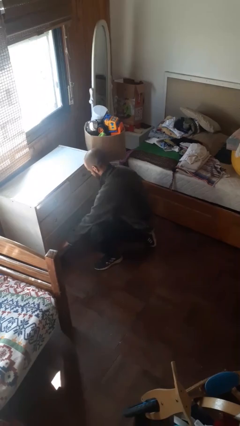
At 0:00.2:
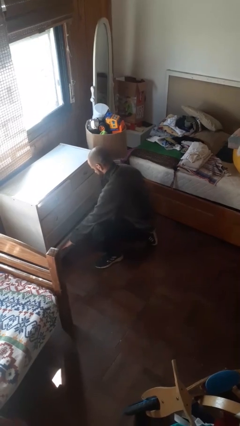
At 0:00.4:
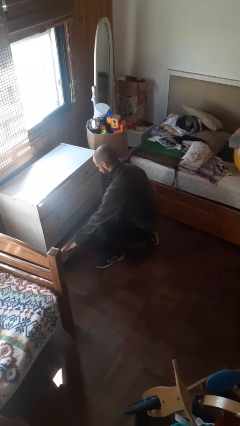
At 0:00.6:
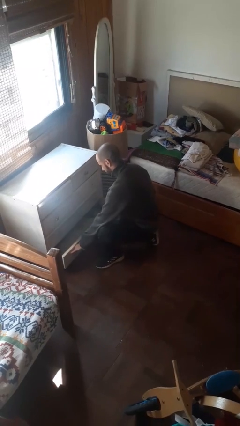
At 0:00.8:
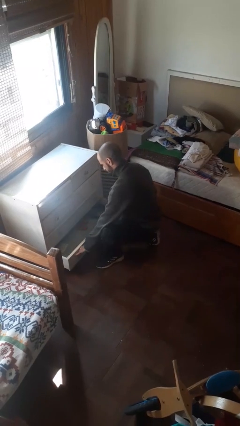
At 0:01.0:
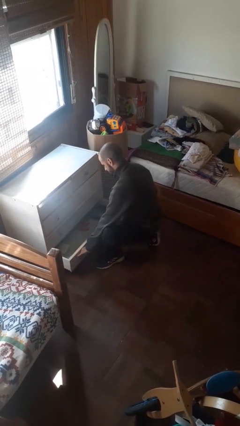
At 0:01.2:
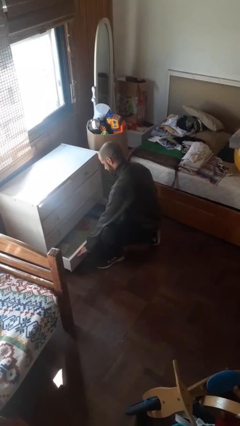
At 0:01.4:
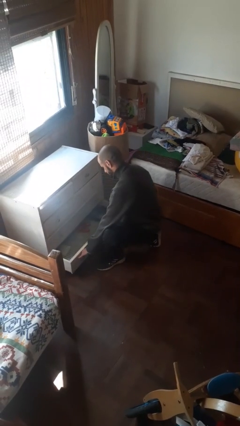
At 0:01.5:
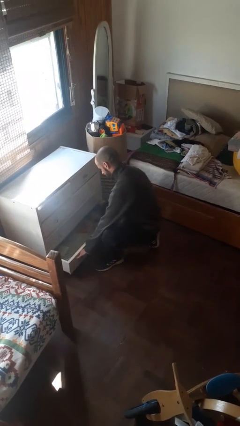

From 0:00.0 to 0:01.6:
person opens dresser drawer

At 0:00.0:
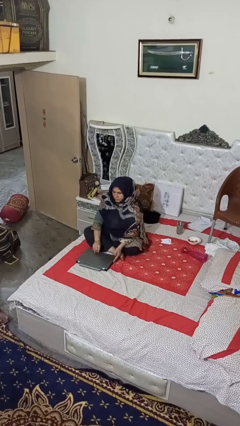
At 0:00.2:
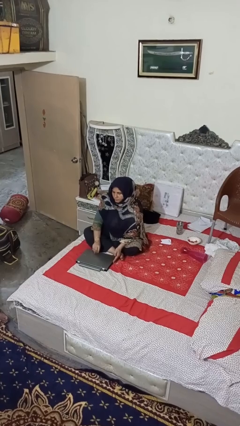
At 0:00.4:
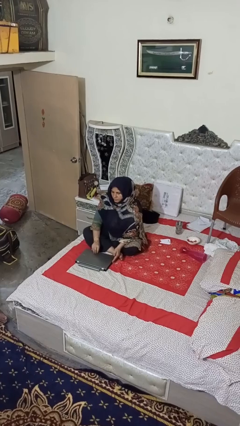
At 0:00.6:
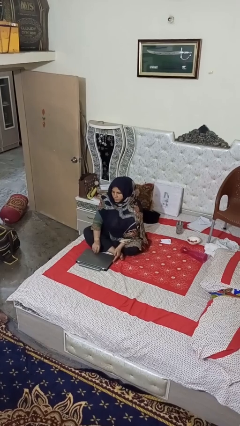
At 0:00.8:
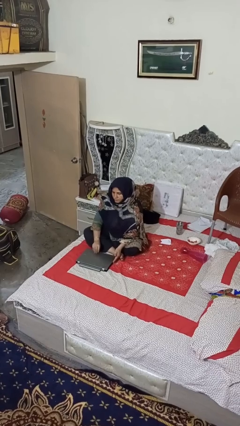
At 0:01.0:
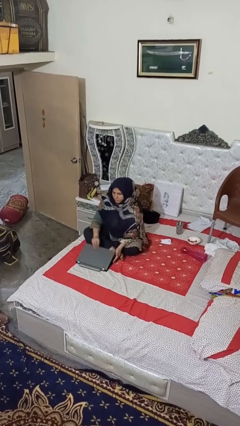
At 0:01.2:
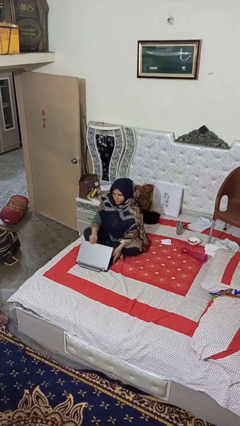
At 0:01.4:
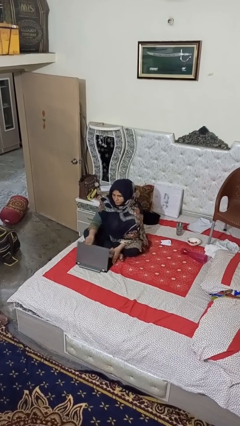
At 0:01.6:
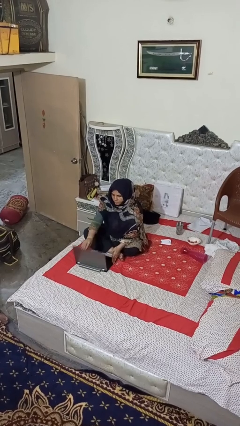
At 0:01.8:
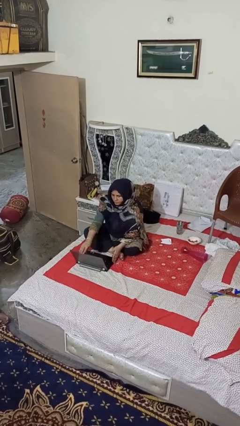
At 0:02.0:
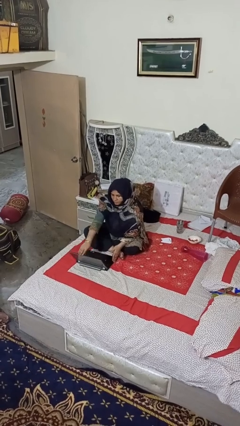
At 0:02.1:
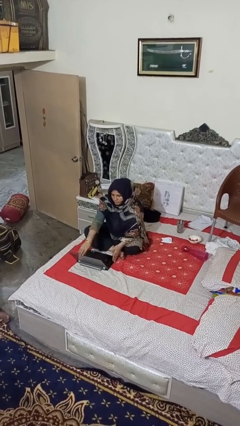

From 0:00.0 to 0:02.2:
person opens laptop

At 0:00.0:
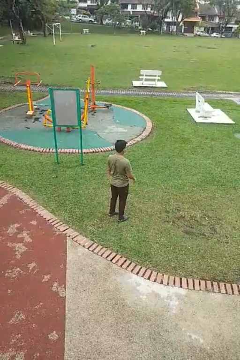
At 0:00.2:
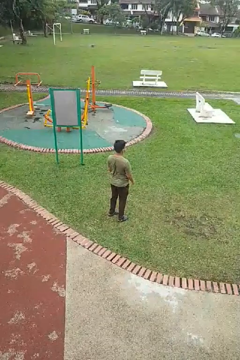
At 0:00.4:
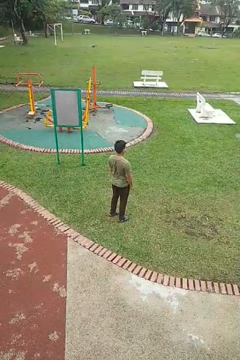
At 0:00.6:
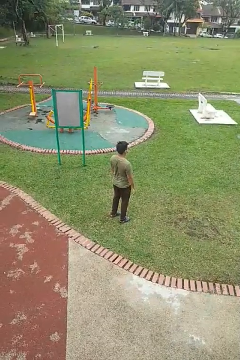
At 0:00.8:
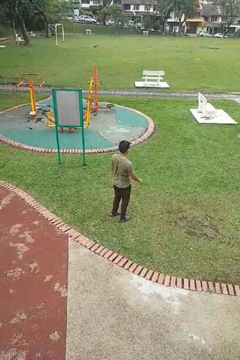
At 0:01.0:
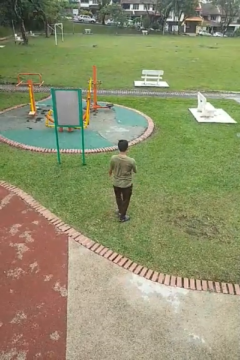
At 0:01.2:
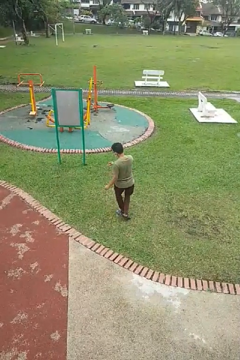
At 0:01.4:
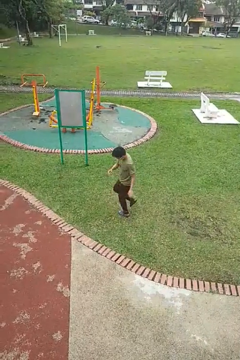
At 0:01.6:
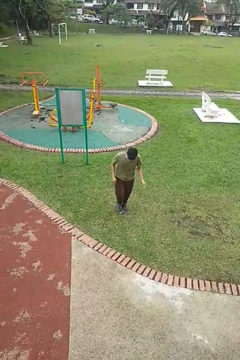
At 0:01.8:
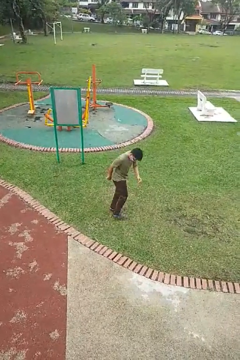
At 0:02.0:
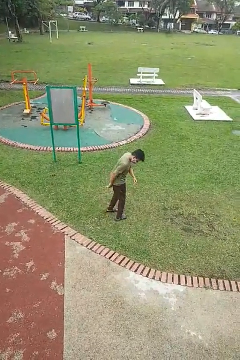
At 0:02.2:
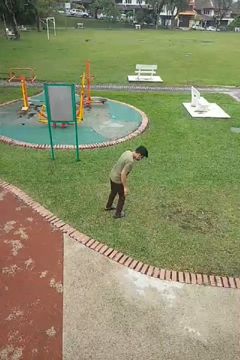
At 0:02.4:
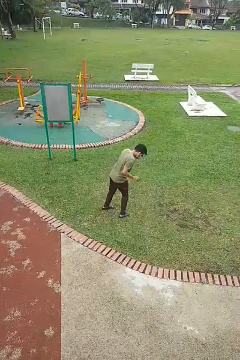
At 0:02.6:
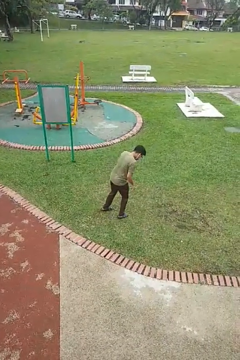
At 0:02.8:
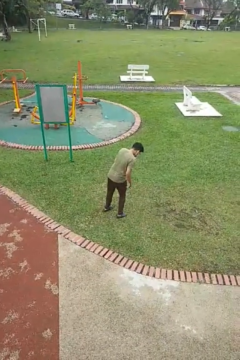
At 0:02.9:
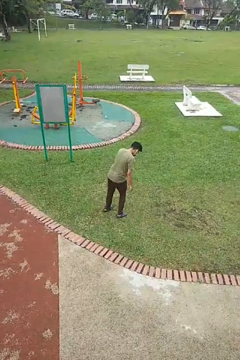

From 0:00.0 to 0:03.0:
person twirls

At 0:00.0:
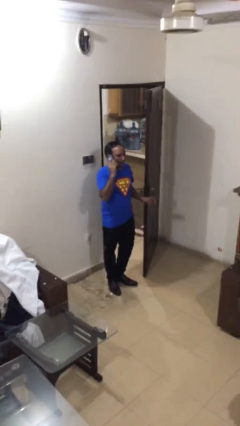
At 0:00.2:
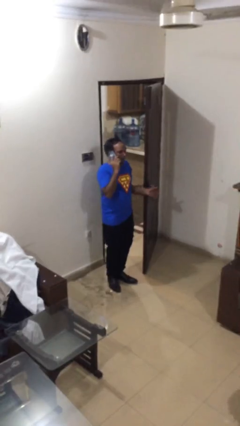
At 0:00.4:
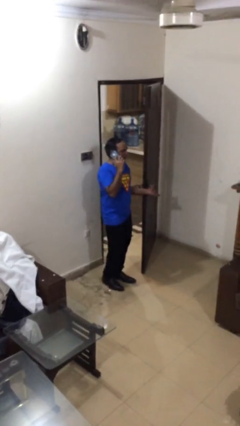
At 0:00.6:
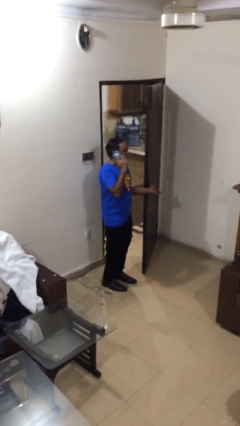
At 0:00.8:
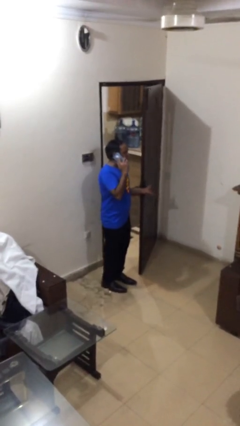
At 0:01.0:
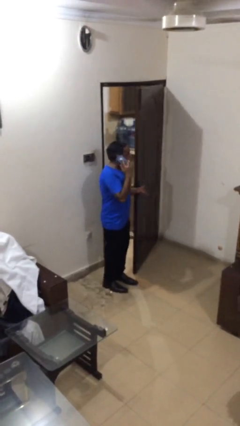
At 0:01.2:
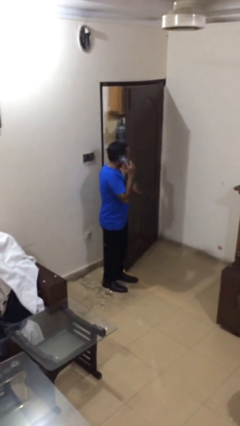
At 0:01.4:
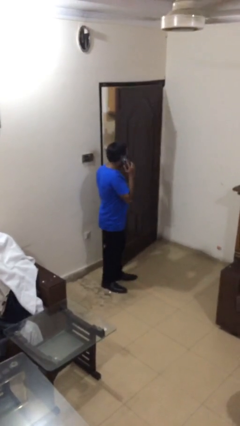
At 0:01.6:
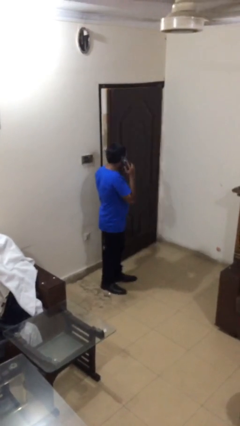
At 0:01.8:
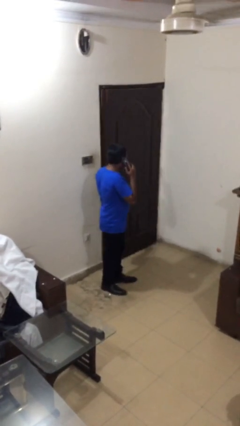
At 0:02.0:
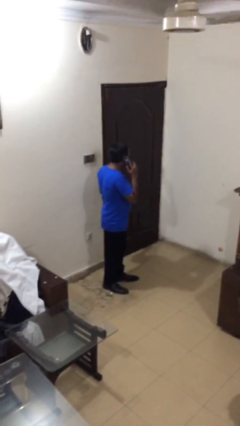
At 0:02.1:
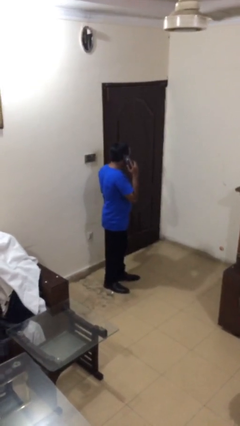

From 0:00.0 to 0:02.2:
person closes facility door

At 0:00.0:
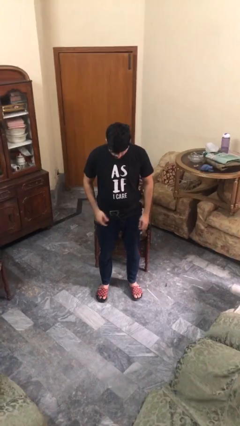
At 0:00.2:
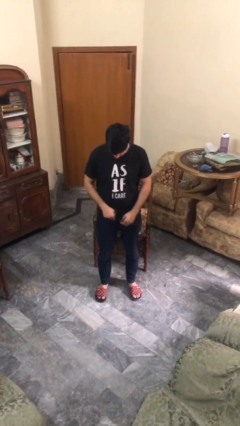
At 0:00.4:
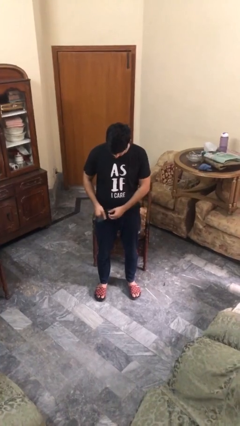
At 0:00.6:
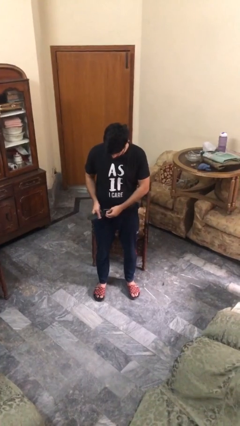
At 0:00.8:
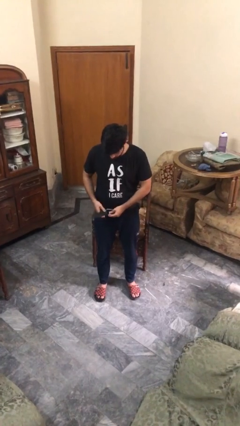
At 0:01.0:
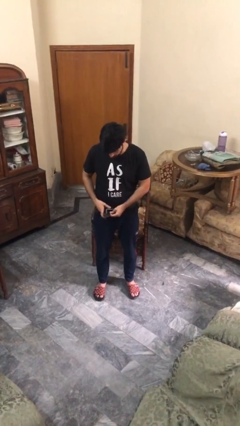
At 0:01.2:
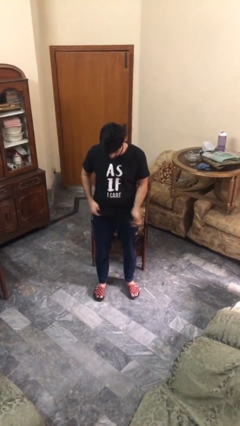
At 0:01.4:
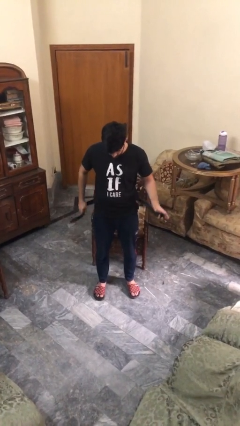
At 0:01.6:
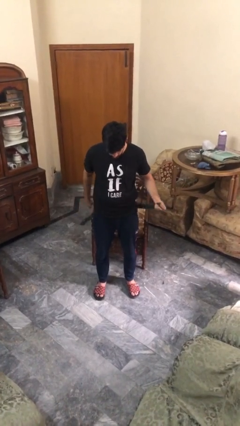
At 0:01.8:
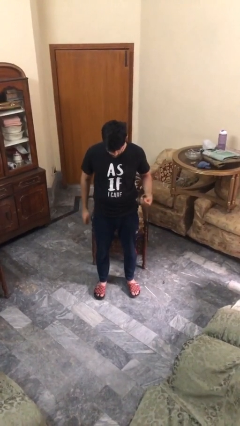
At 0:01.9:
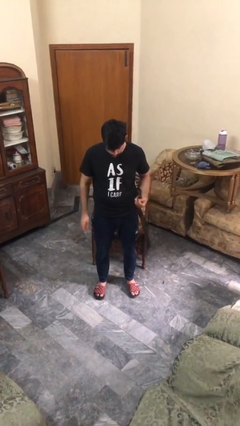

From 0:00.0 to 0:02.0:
person takes off belt

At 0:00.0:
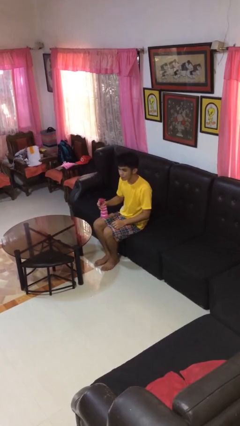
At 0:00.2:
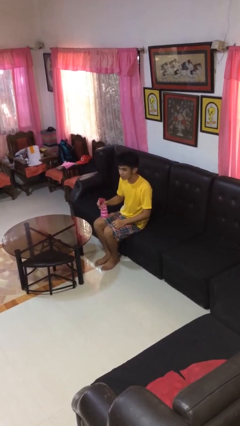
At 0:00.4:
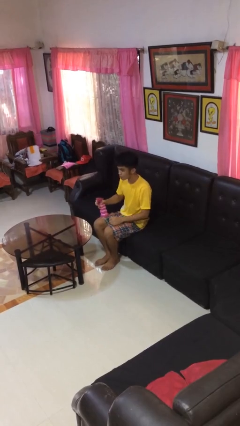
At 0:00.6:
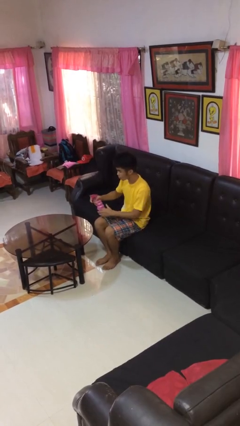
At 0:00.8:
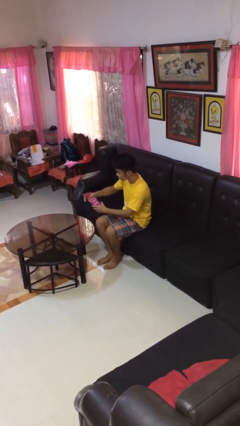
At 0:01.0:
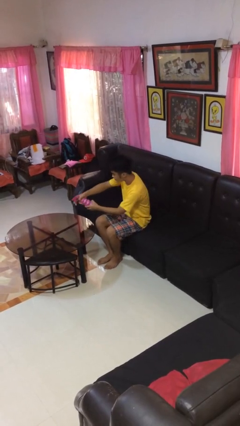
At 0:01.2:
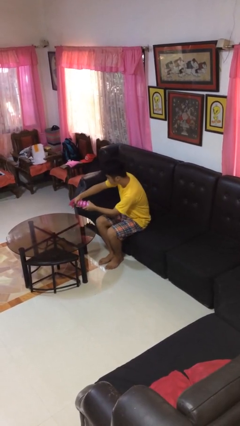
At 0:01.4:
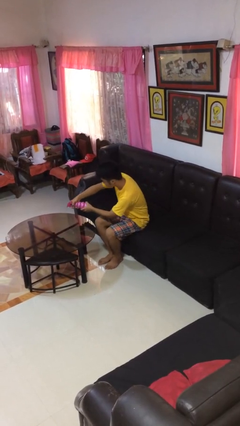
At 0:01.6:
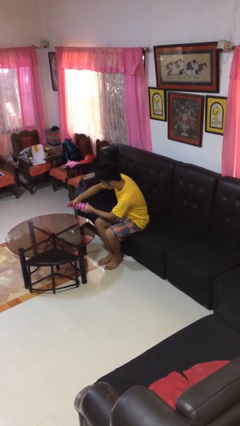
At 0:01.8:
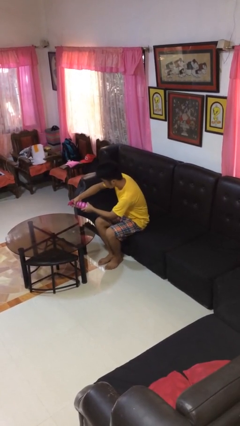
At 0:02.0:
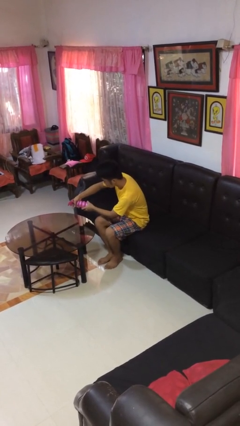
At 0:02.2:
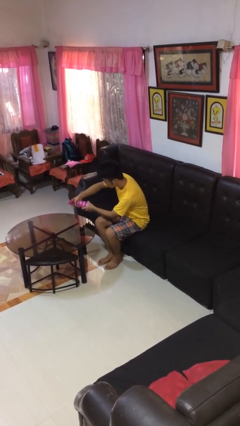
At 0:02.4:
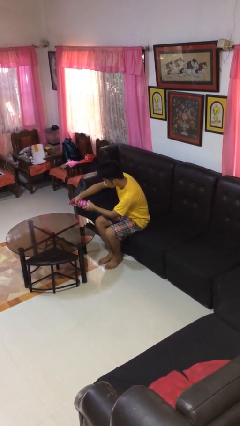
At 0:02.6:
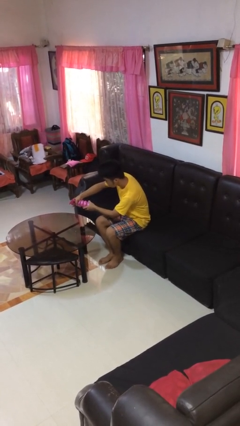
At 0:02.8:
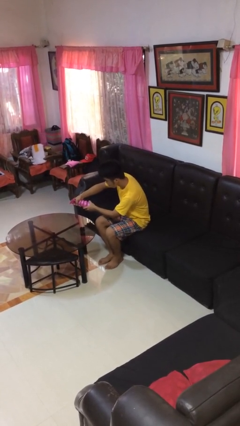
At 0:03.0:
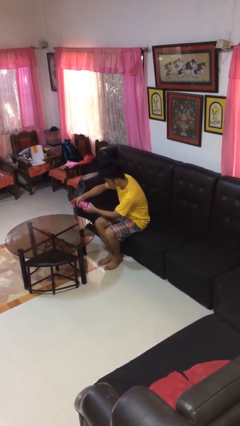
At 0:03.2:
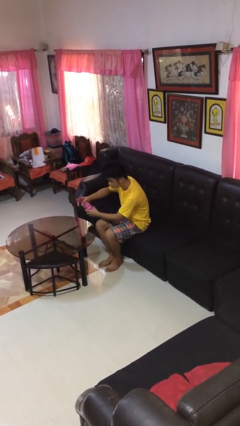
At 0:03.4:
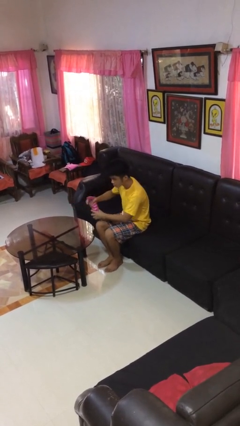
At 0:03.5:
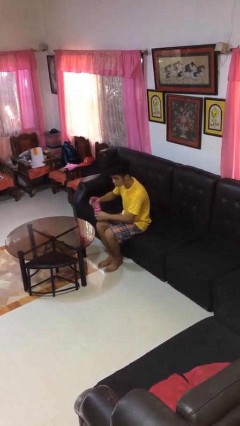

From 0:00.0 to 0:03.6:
person sprays from bottle

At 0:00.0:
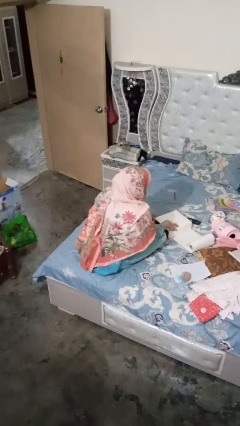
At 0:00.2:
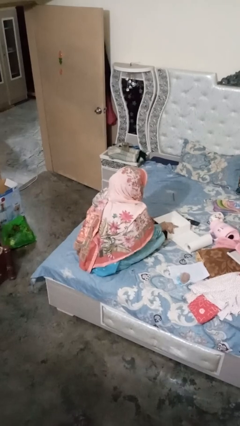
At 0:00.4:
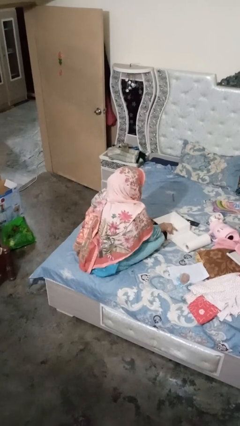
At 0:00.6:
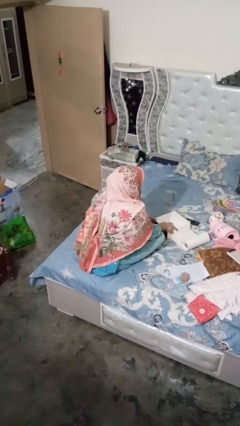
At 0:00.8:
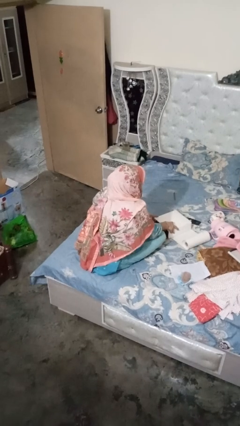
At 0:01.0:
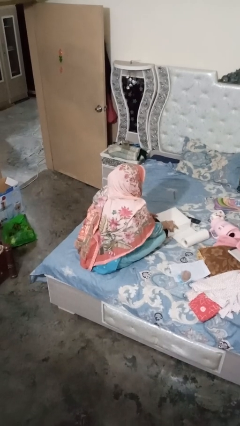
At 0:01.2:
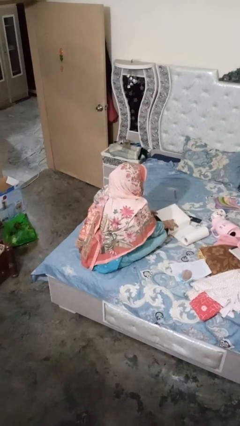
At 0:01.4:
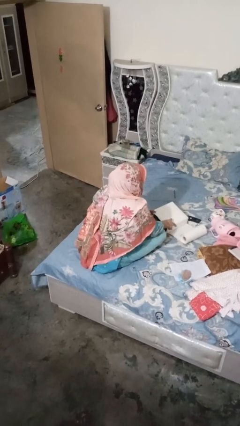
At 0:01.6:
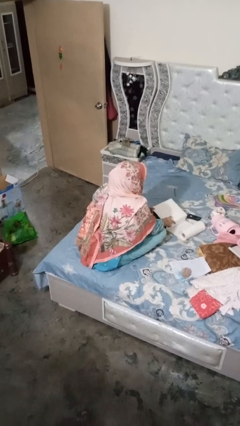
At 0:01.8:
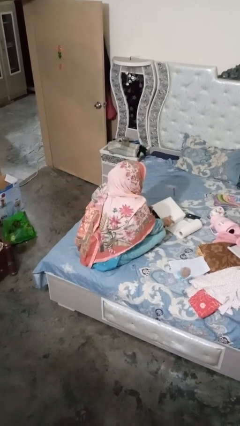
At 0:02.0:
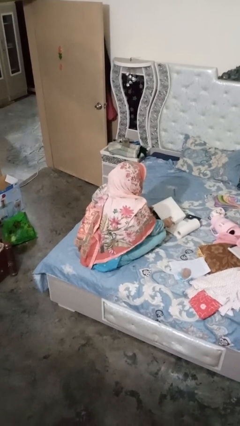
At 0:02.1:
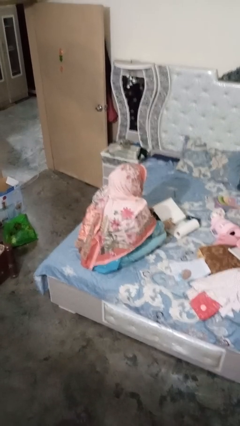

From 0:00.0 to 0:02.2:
person wraps box

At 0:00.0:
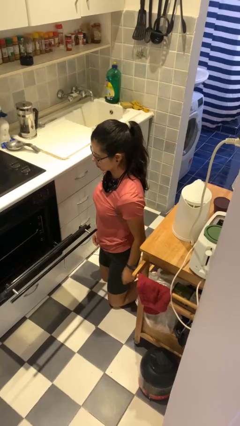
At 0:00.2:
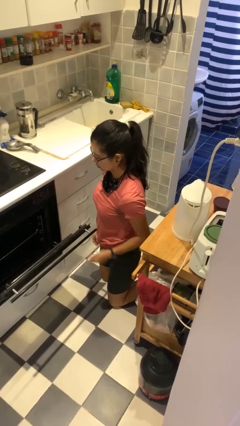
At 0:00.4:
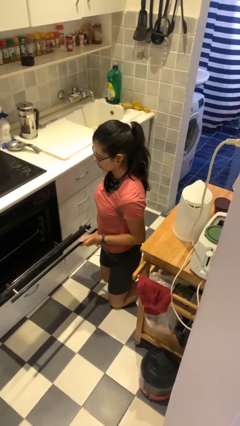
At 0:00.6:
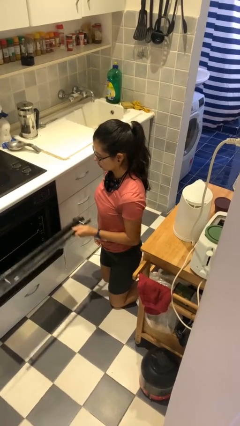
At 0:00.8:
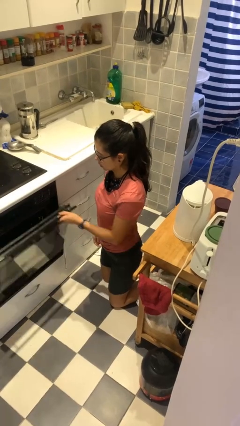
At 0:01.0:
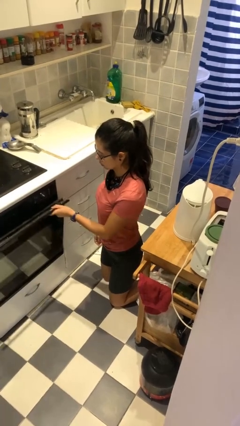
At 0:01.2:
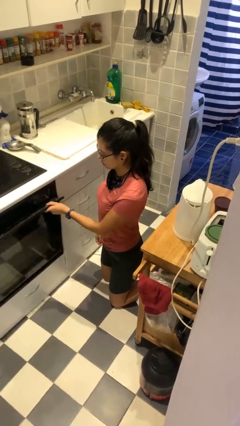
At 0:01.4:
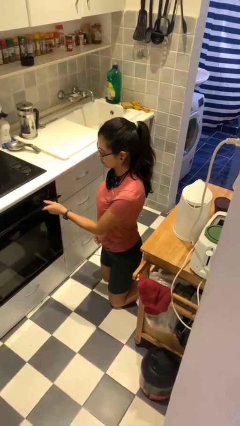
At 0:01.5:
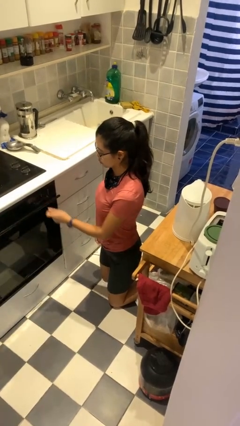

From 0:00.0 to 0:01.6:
person closes oven door
